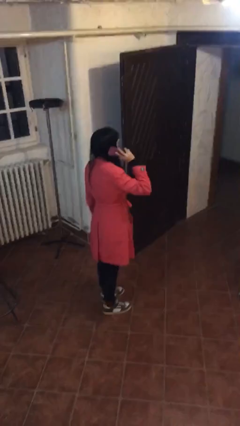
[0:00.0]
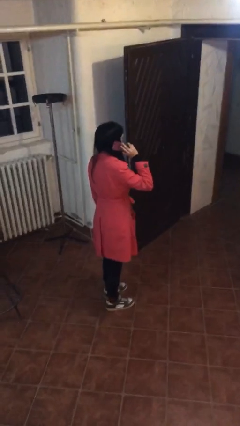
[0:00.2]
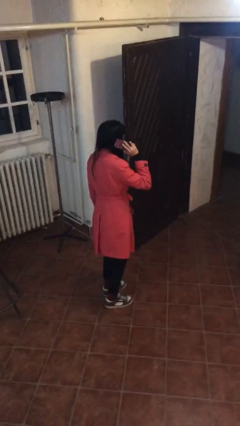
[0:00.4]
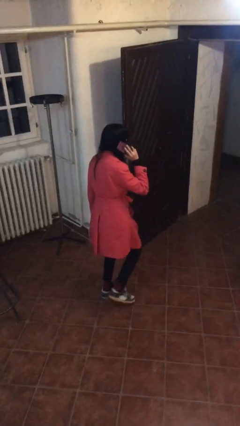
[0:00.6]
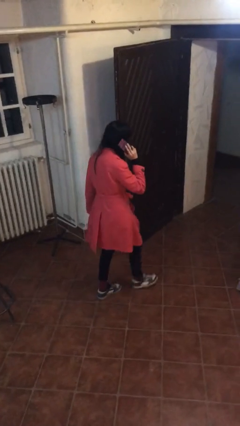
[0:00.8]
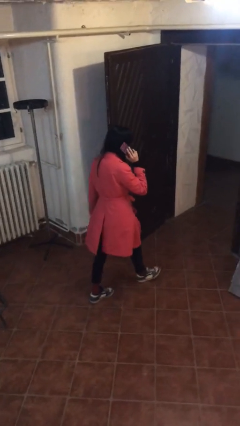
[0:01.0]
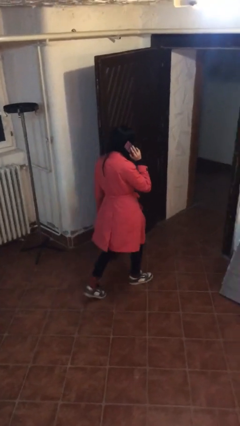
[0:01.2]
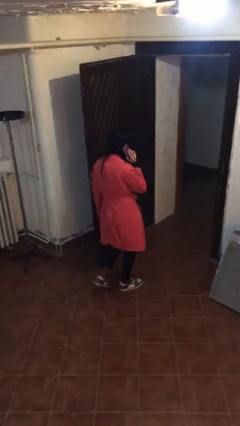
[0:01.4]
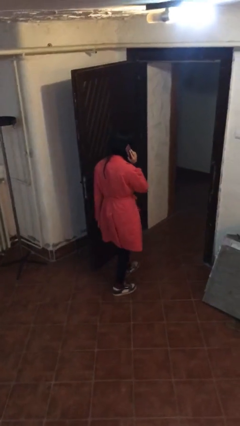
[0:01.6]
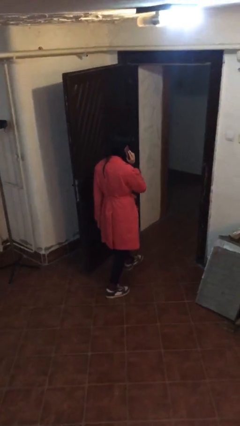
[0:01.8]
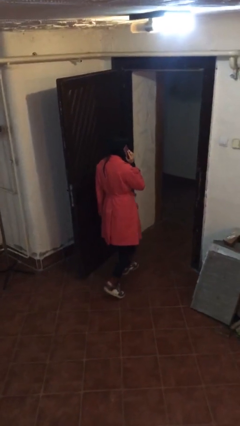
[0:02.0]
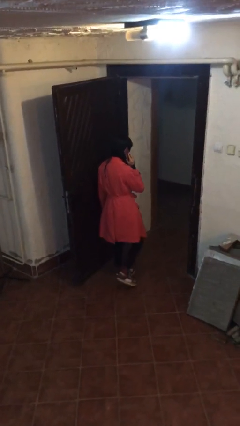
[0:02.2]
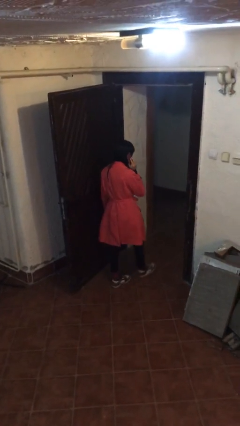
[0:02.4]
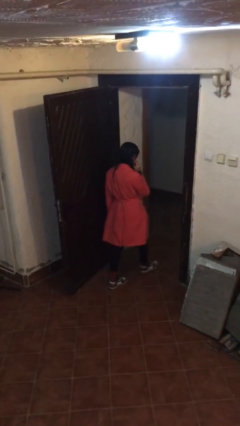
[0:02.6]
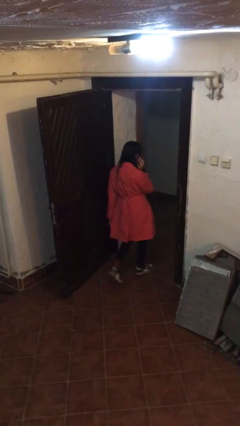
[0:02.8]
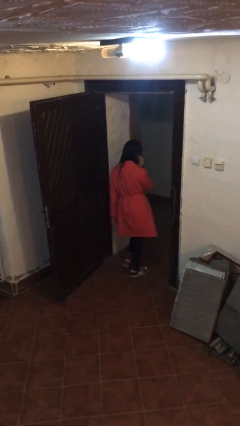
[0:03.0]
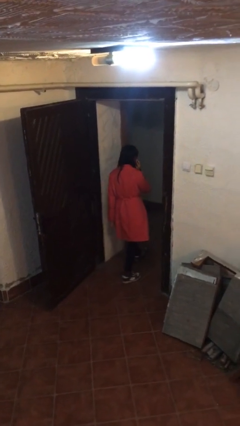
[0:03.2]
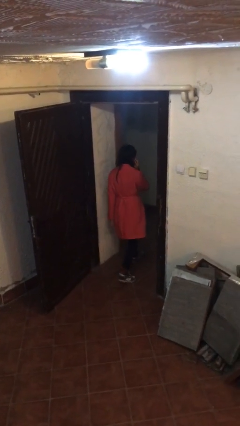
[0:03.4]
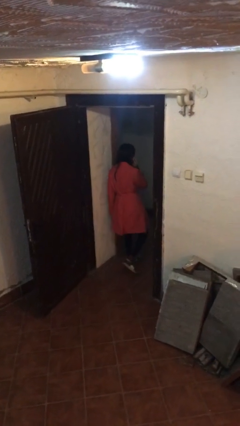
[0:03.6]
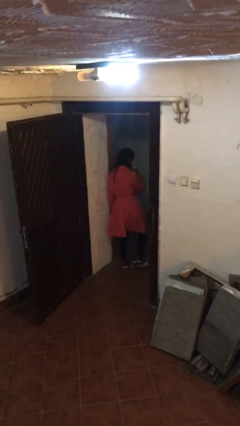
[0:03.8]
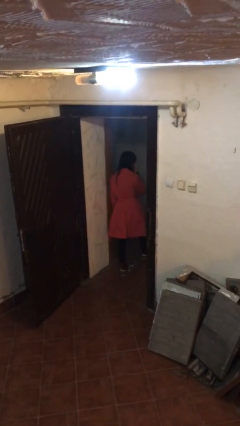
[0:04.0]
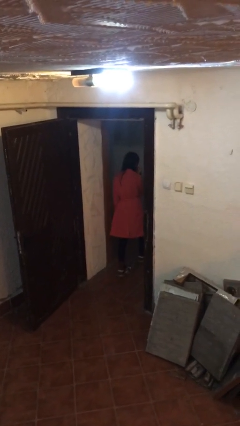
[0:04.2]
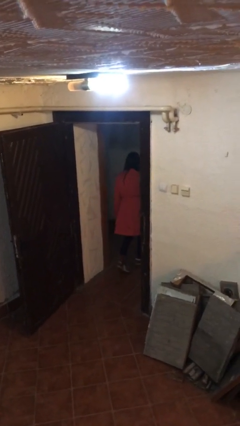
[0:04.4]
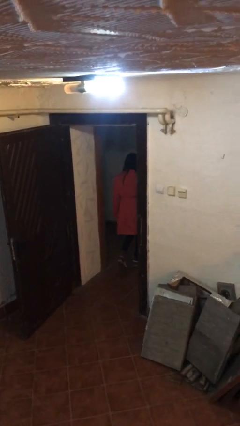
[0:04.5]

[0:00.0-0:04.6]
person exits scene through structure

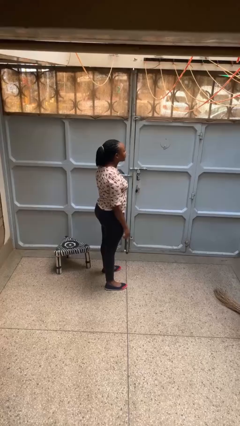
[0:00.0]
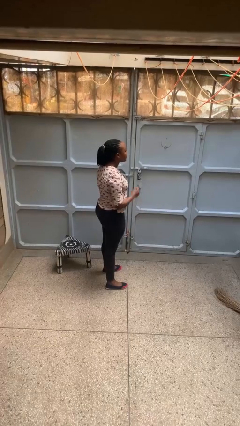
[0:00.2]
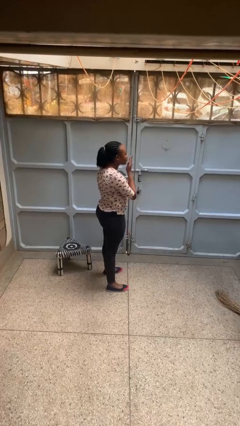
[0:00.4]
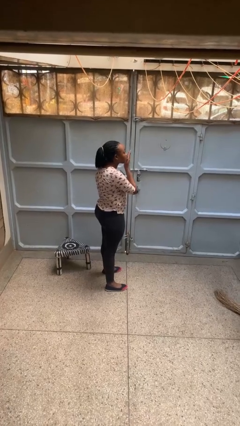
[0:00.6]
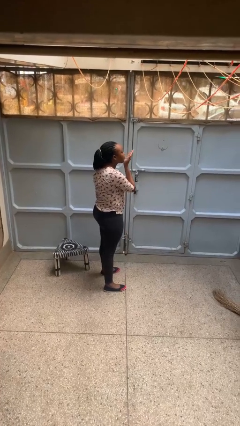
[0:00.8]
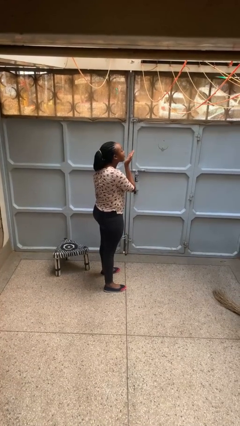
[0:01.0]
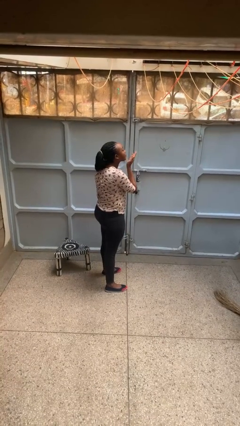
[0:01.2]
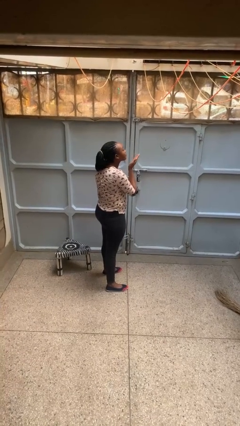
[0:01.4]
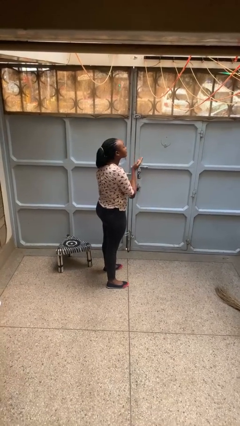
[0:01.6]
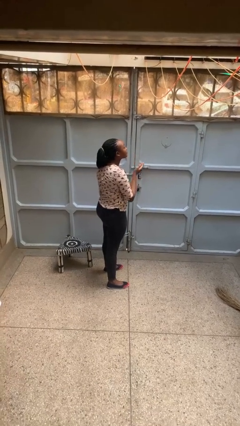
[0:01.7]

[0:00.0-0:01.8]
person gestures blow kiss

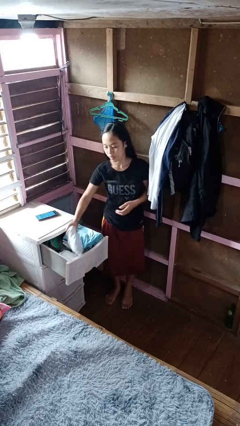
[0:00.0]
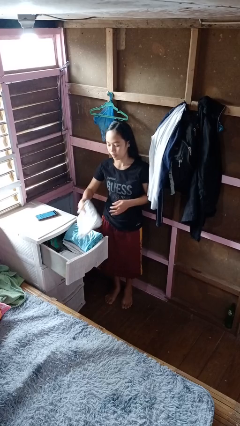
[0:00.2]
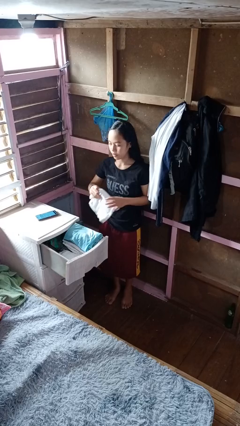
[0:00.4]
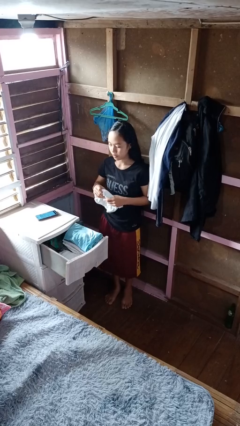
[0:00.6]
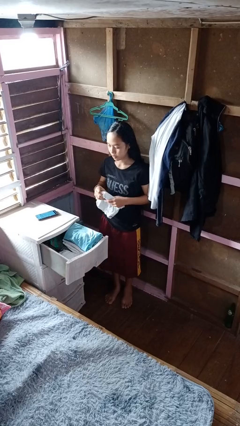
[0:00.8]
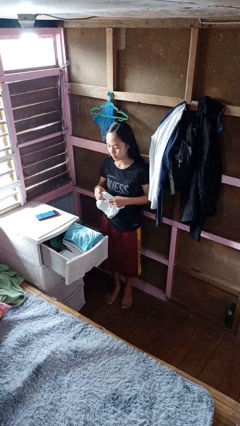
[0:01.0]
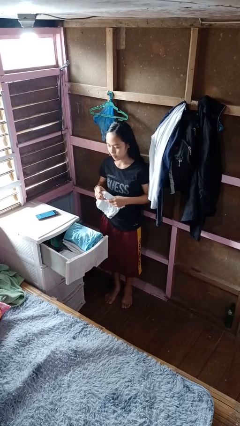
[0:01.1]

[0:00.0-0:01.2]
person takes clothes from dresser

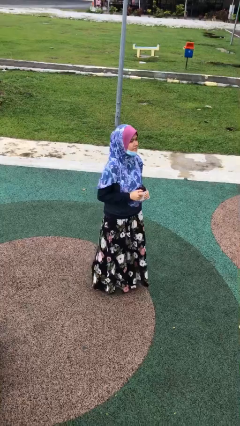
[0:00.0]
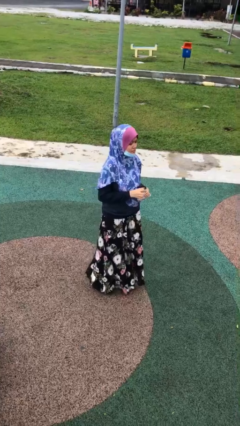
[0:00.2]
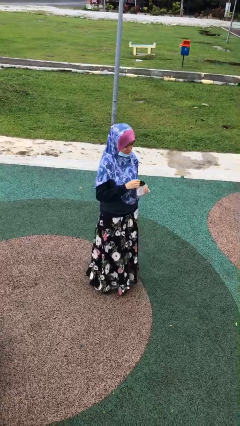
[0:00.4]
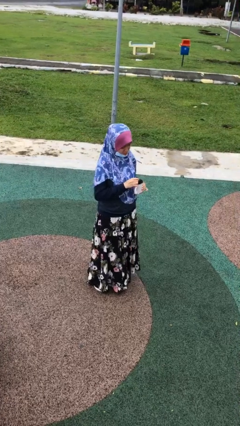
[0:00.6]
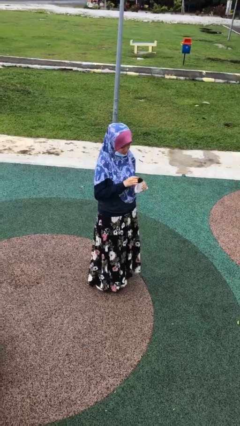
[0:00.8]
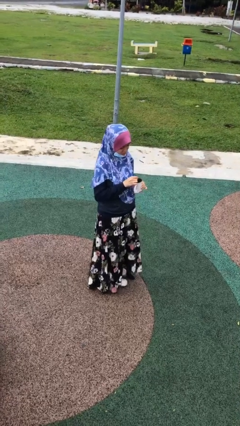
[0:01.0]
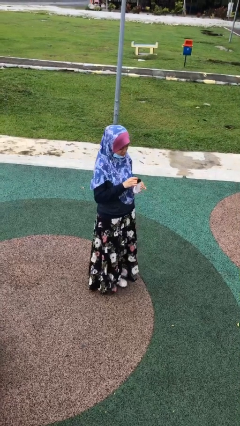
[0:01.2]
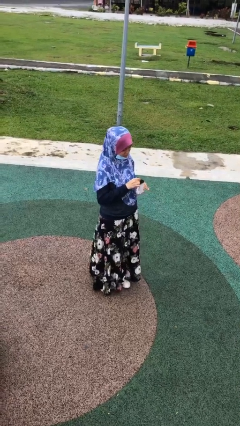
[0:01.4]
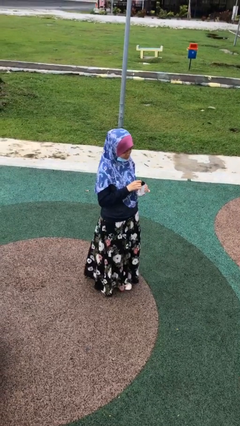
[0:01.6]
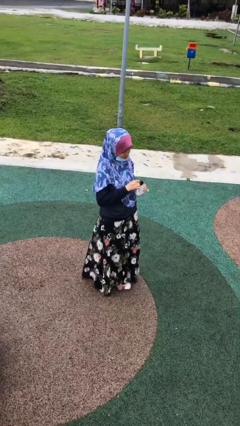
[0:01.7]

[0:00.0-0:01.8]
person stirs mug

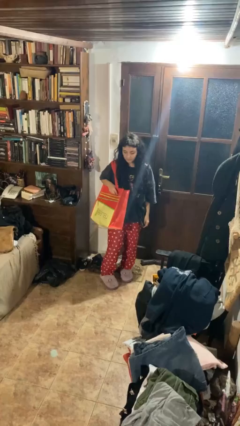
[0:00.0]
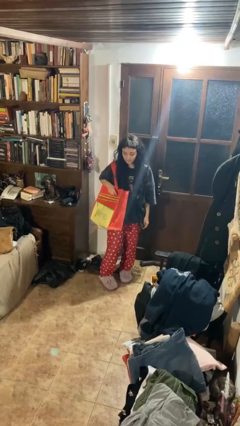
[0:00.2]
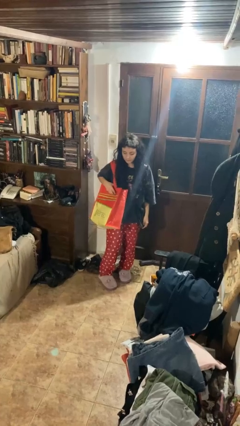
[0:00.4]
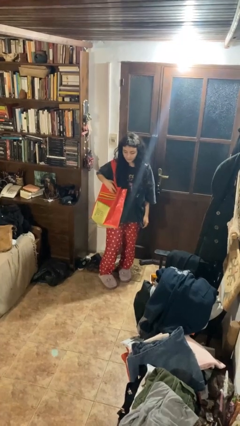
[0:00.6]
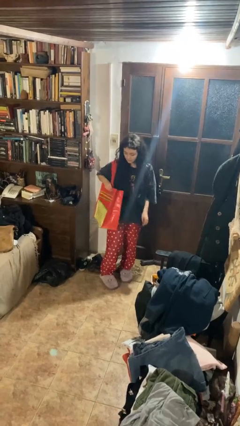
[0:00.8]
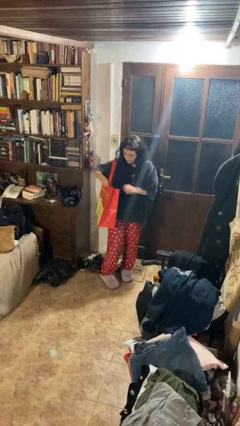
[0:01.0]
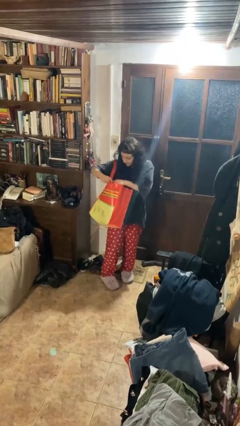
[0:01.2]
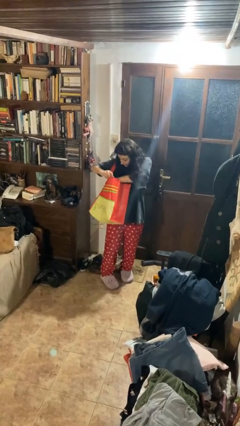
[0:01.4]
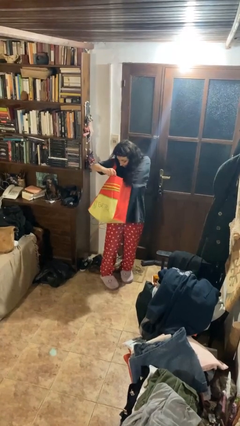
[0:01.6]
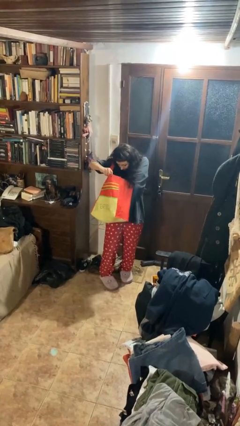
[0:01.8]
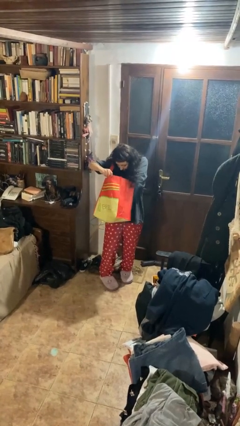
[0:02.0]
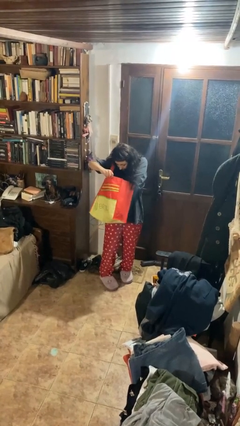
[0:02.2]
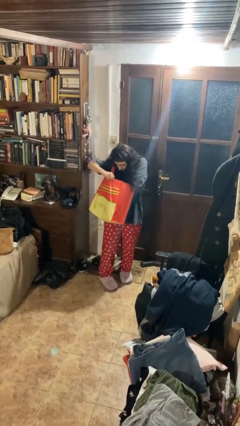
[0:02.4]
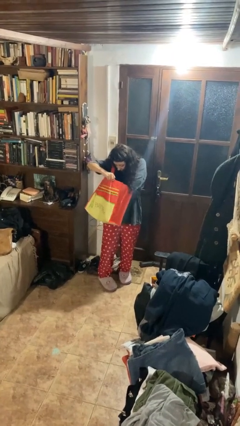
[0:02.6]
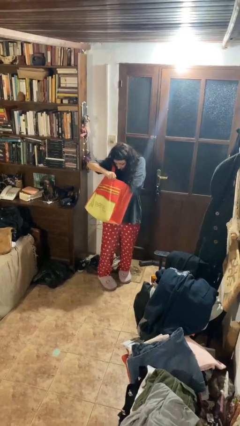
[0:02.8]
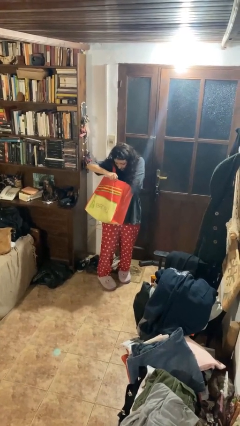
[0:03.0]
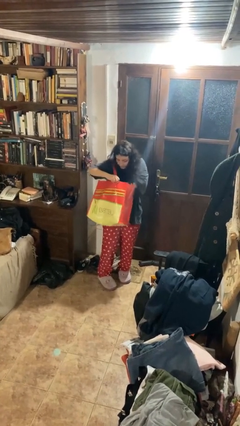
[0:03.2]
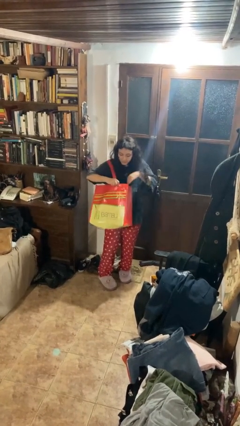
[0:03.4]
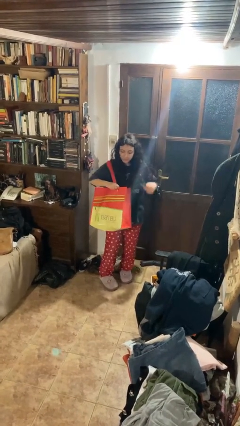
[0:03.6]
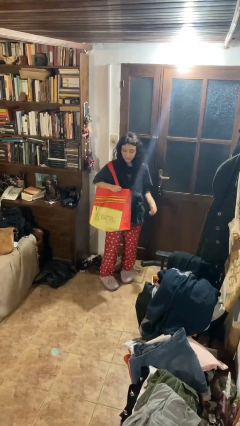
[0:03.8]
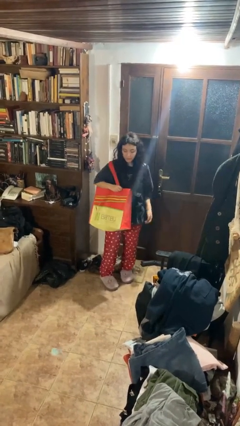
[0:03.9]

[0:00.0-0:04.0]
person searches in bag

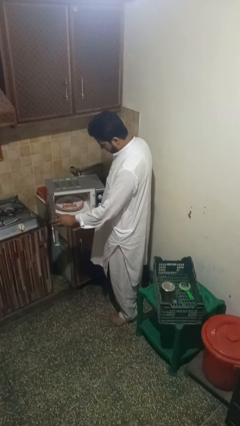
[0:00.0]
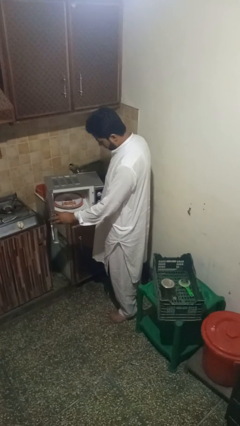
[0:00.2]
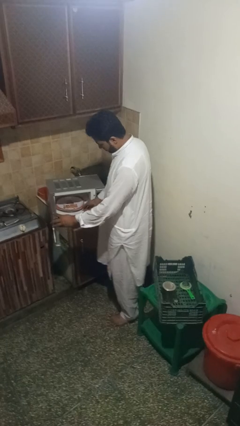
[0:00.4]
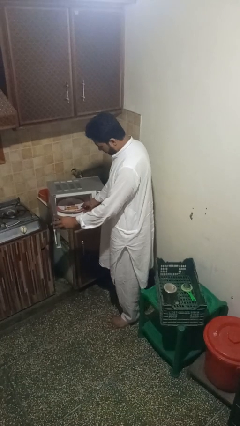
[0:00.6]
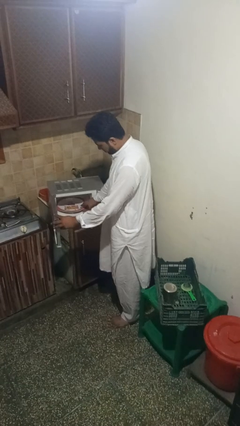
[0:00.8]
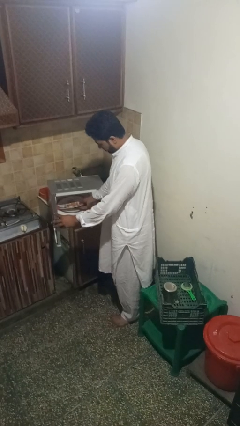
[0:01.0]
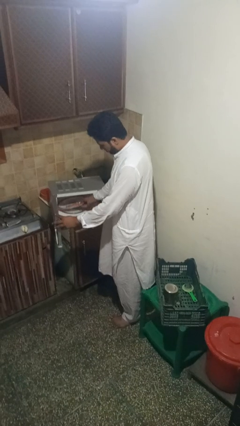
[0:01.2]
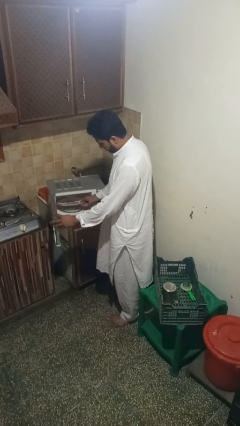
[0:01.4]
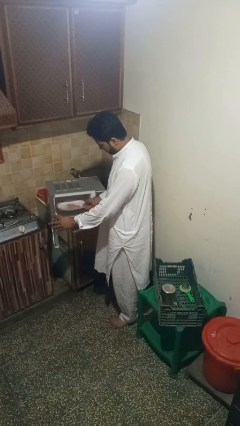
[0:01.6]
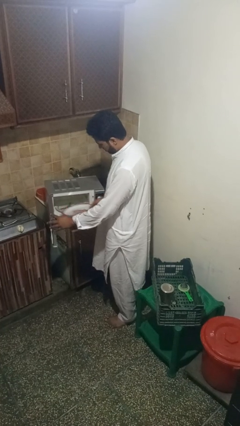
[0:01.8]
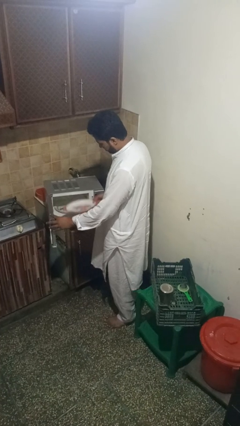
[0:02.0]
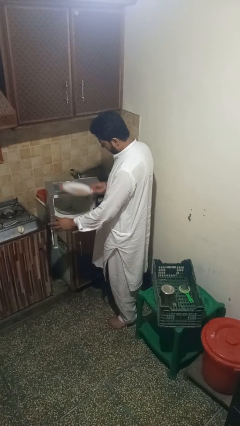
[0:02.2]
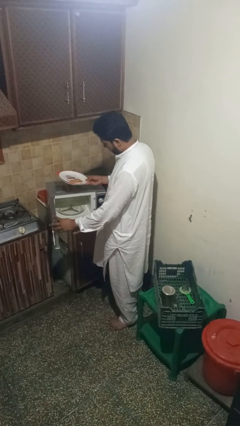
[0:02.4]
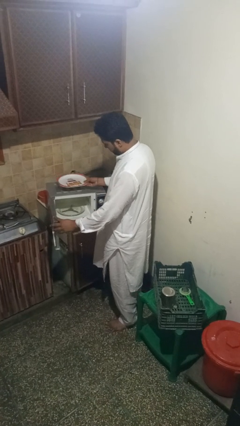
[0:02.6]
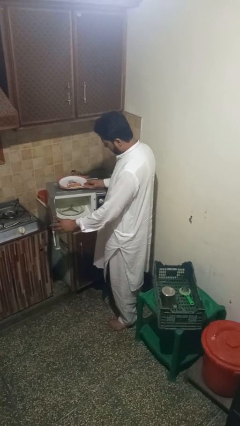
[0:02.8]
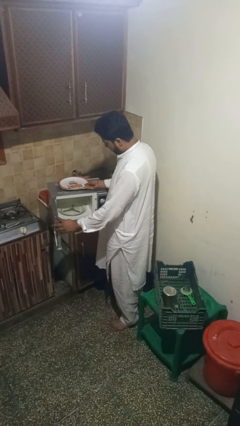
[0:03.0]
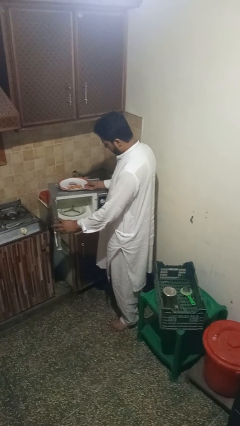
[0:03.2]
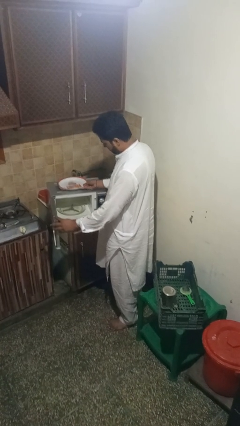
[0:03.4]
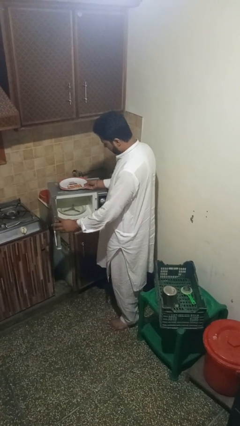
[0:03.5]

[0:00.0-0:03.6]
person takes object from microwave
